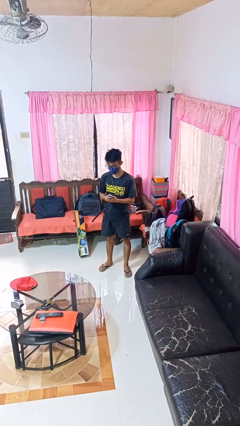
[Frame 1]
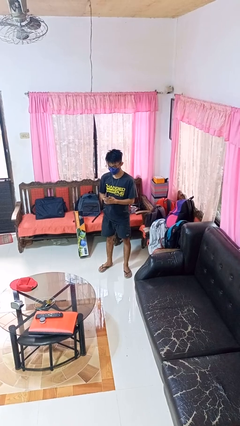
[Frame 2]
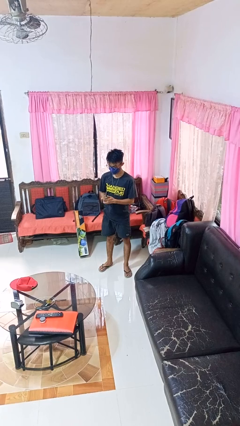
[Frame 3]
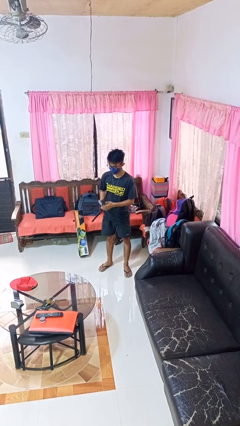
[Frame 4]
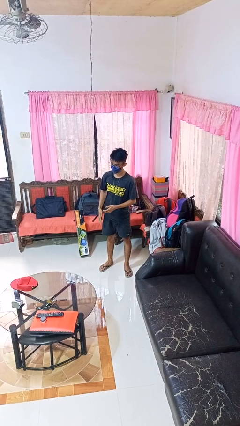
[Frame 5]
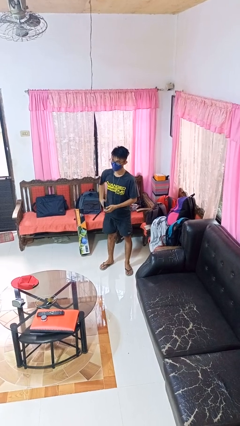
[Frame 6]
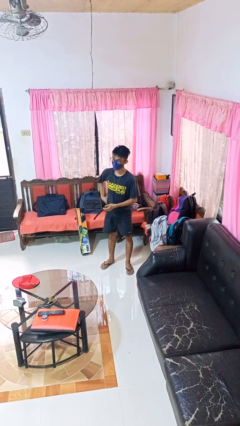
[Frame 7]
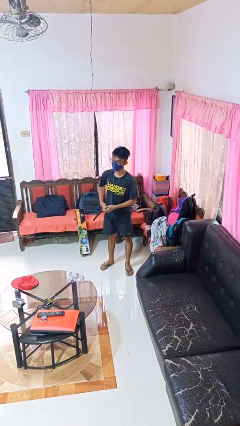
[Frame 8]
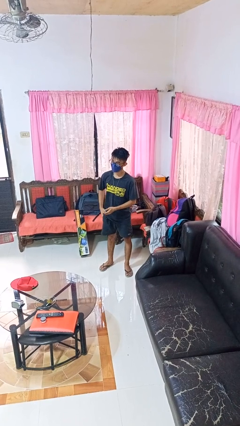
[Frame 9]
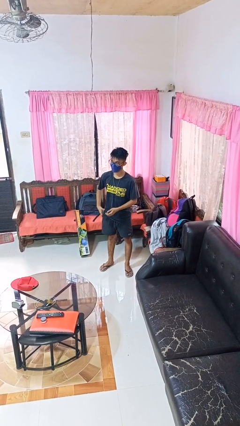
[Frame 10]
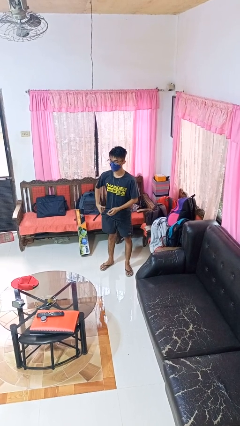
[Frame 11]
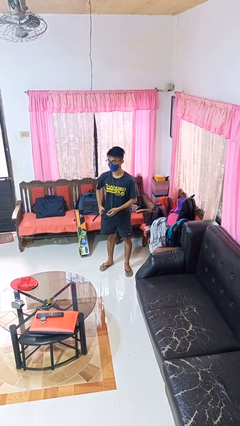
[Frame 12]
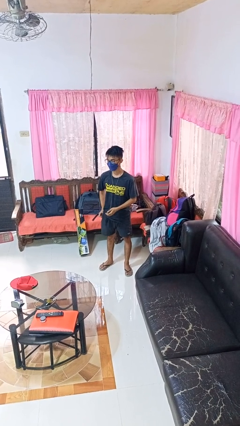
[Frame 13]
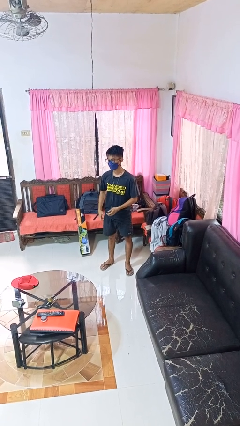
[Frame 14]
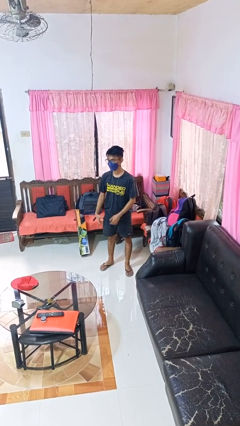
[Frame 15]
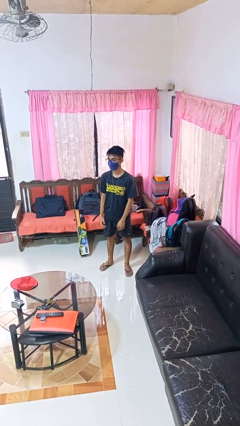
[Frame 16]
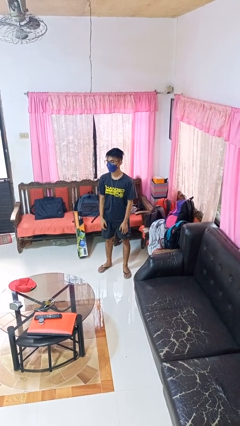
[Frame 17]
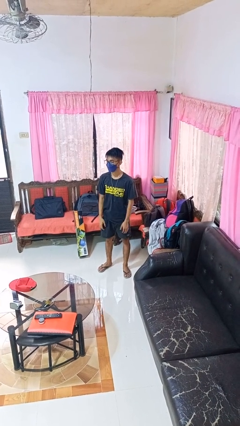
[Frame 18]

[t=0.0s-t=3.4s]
person puts phone into pocket

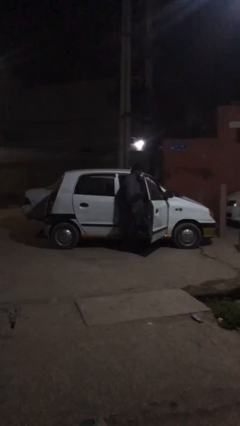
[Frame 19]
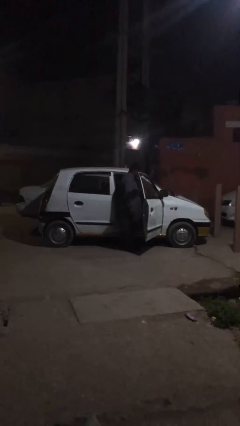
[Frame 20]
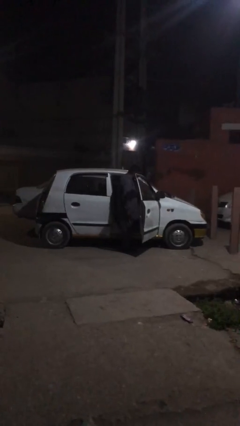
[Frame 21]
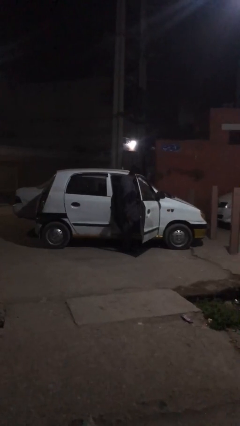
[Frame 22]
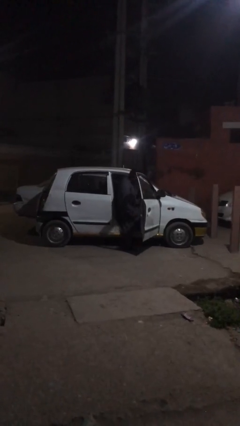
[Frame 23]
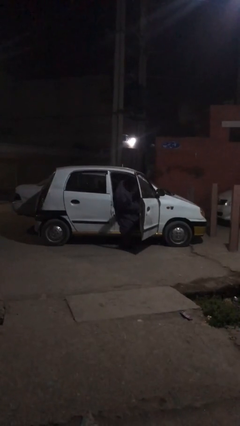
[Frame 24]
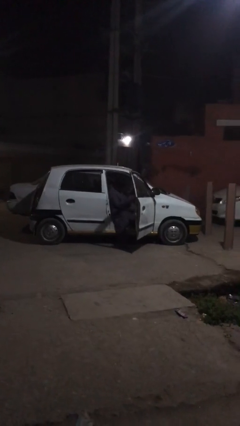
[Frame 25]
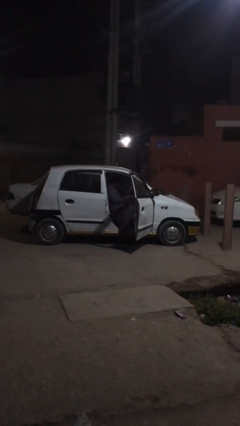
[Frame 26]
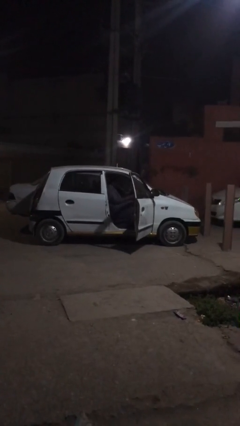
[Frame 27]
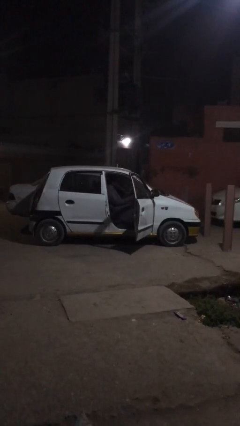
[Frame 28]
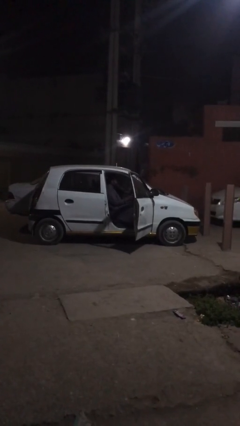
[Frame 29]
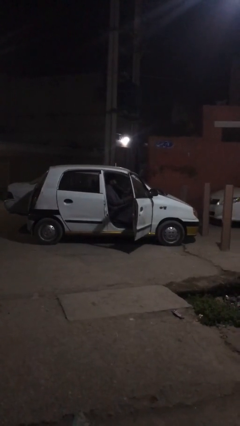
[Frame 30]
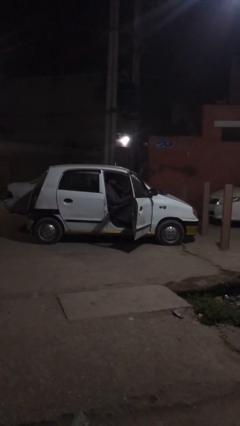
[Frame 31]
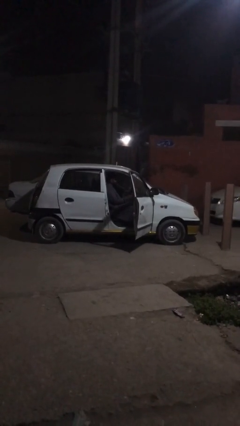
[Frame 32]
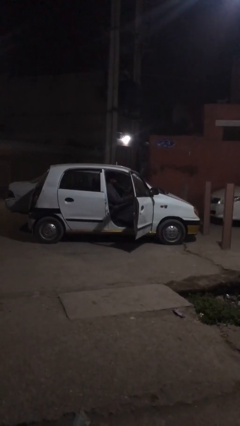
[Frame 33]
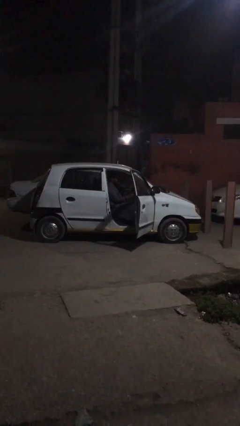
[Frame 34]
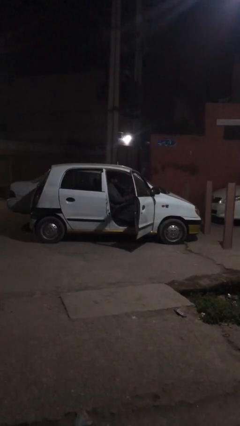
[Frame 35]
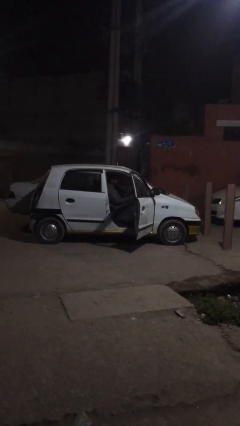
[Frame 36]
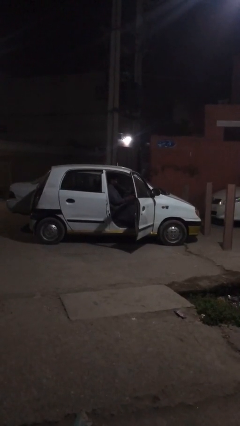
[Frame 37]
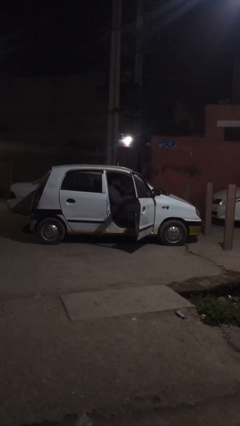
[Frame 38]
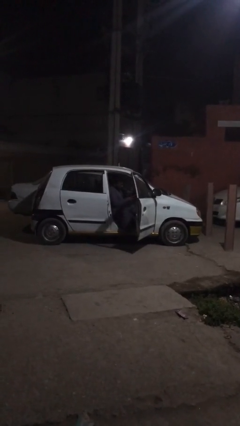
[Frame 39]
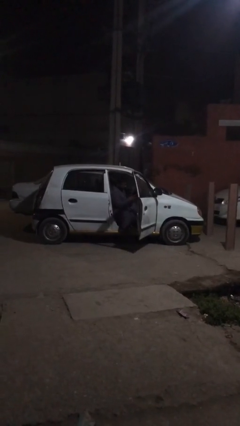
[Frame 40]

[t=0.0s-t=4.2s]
person enters car

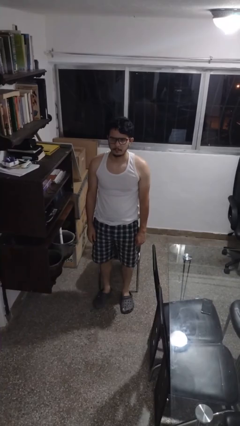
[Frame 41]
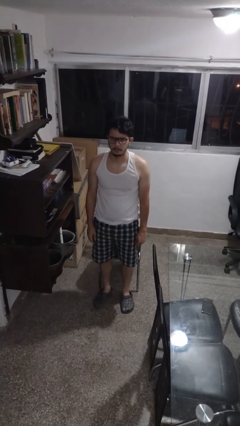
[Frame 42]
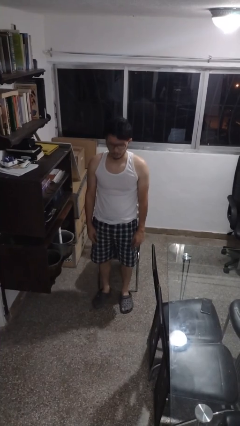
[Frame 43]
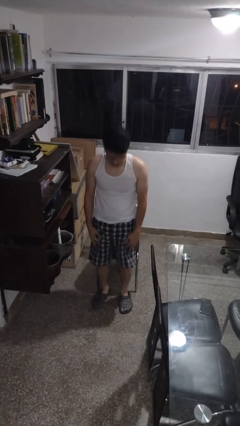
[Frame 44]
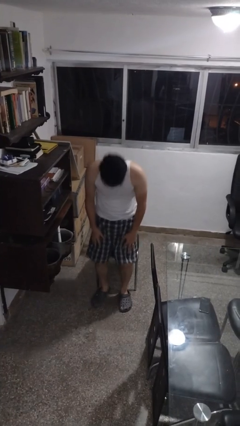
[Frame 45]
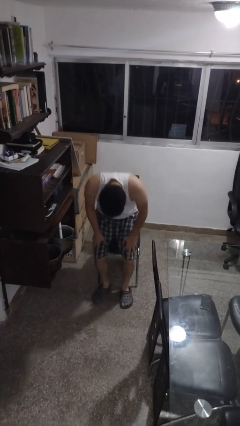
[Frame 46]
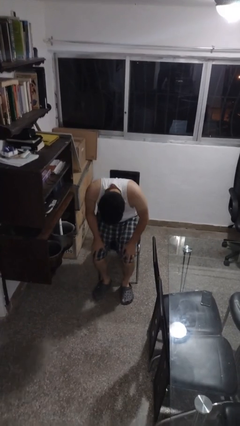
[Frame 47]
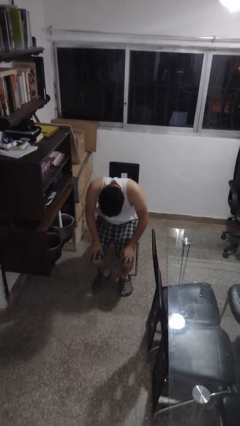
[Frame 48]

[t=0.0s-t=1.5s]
person sits down

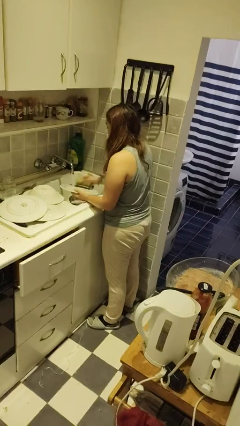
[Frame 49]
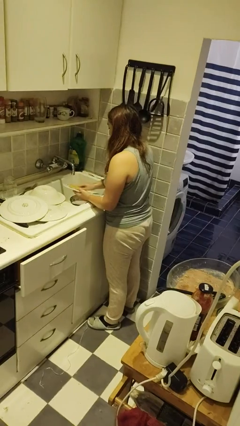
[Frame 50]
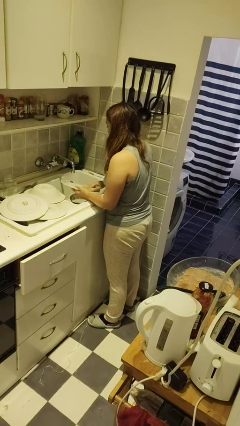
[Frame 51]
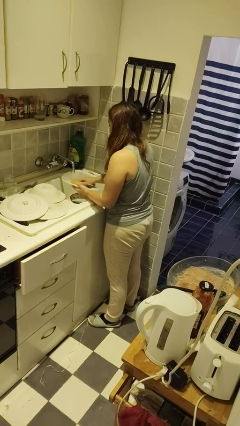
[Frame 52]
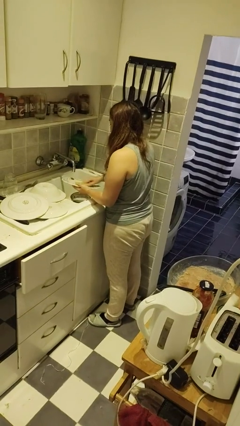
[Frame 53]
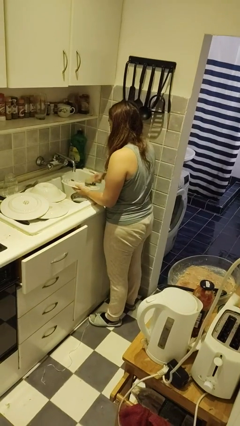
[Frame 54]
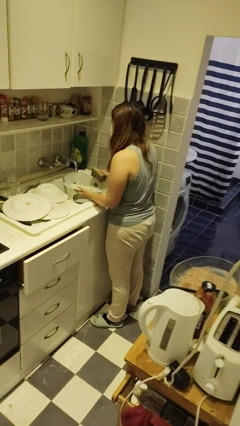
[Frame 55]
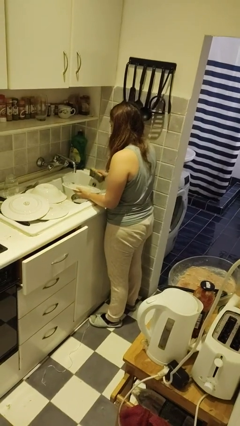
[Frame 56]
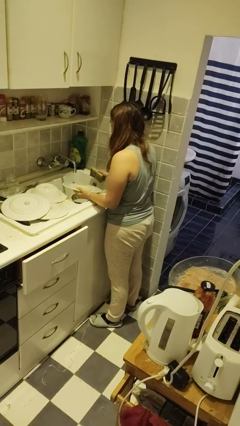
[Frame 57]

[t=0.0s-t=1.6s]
person washes dish

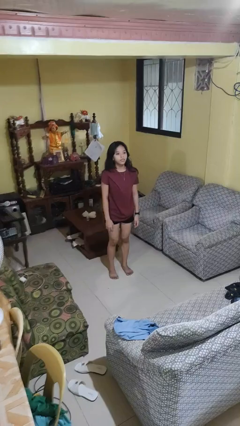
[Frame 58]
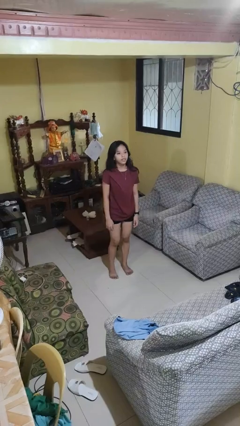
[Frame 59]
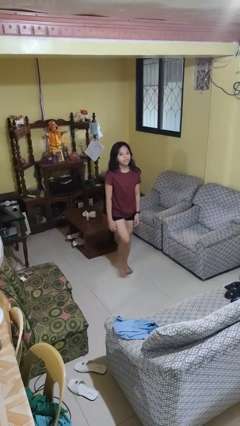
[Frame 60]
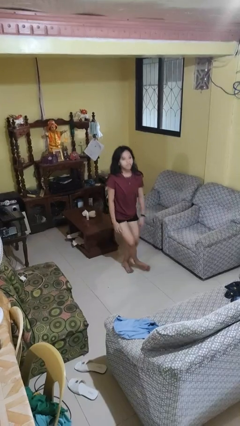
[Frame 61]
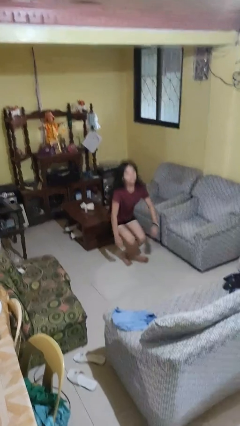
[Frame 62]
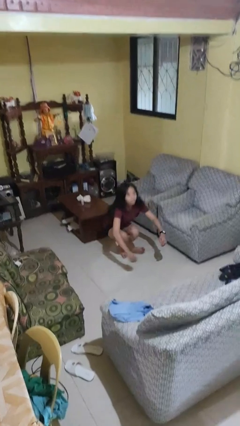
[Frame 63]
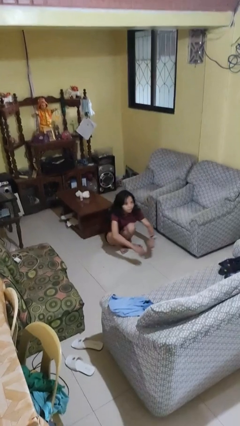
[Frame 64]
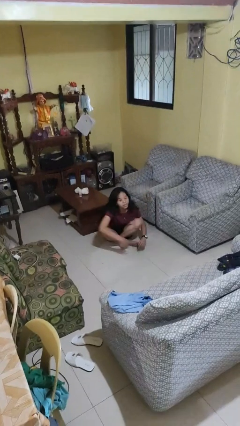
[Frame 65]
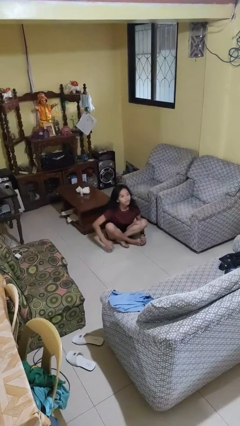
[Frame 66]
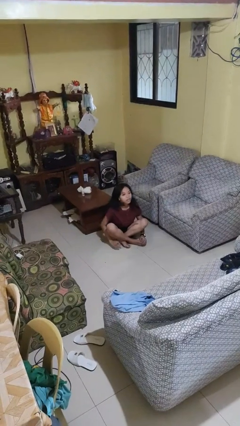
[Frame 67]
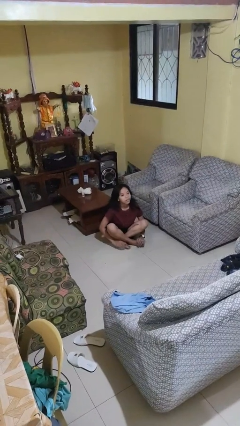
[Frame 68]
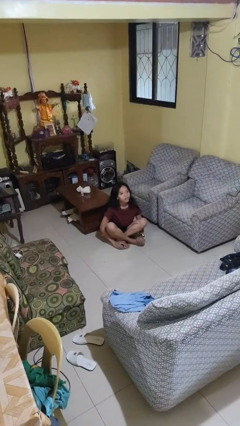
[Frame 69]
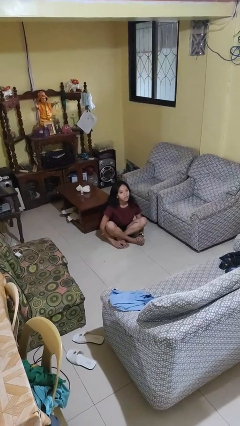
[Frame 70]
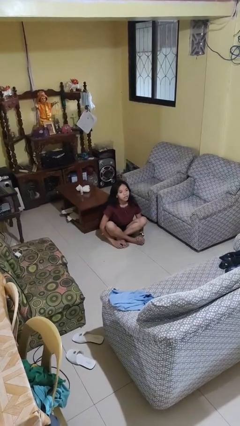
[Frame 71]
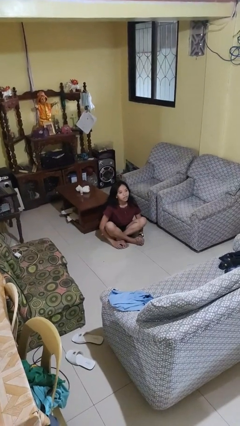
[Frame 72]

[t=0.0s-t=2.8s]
person sits crisscross

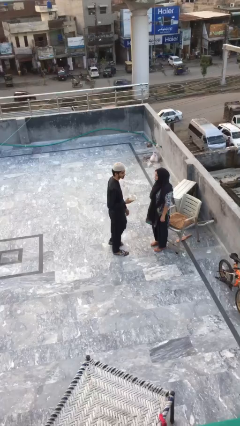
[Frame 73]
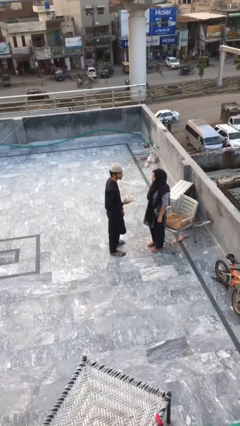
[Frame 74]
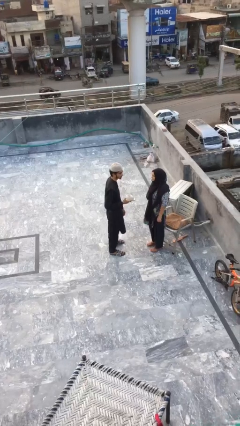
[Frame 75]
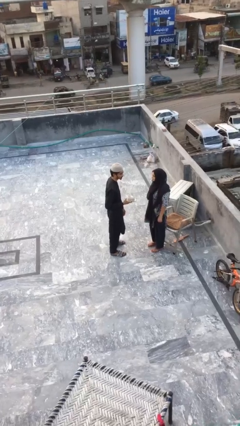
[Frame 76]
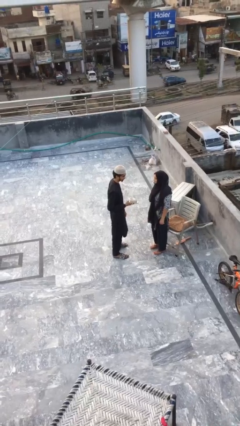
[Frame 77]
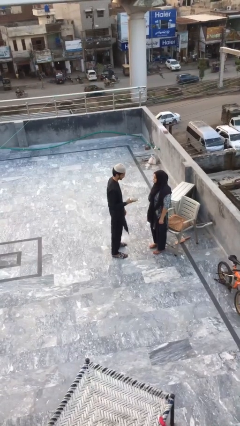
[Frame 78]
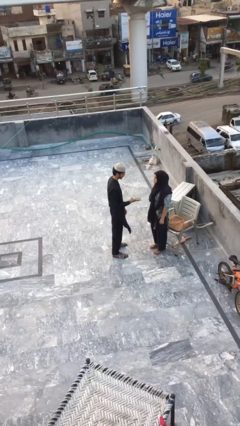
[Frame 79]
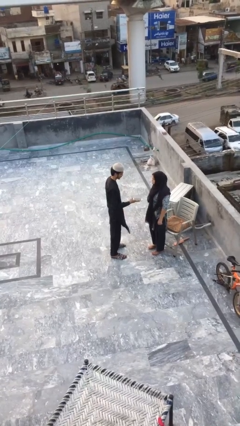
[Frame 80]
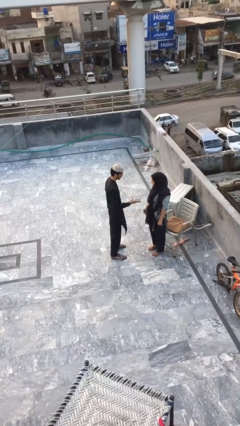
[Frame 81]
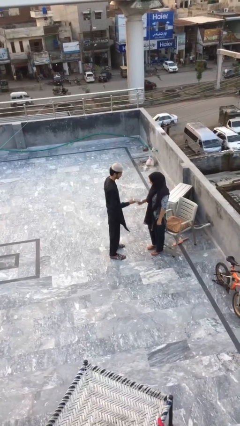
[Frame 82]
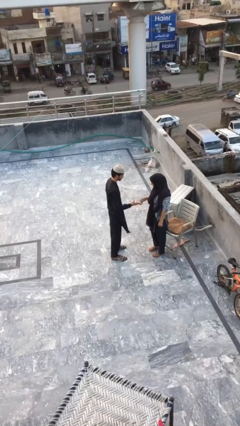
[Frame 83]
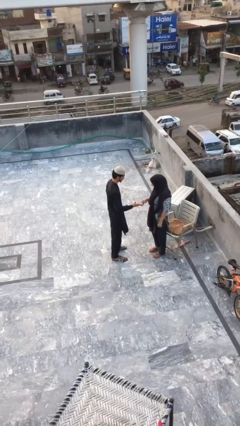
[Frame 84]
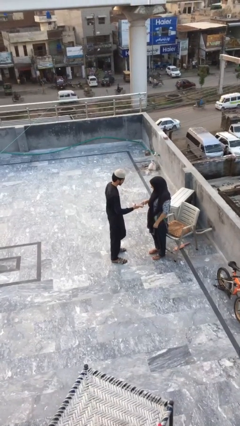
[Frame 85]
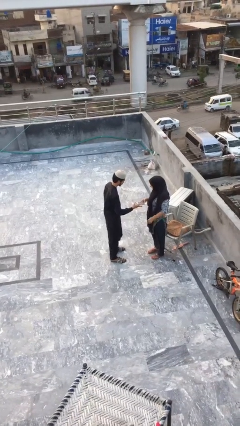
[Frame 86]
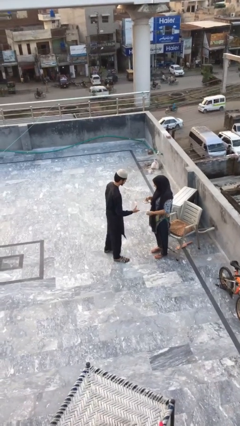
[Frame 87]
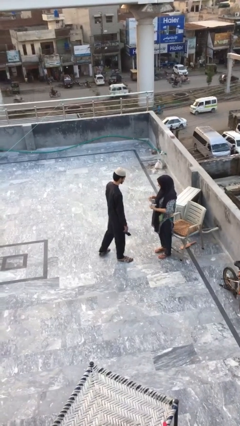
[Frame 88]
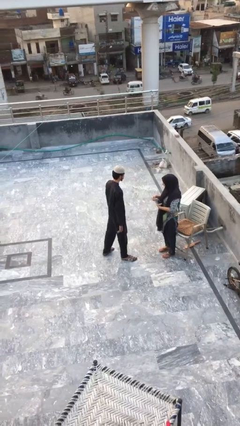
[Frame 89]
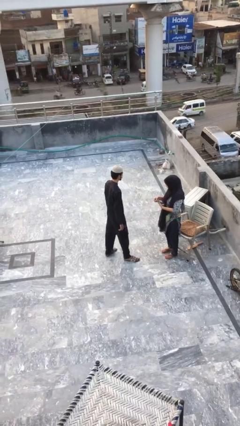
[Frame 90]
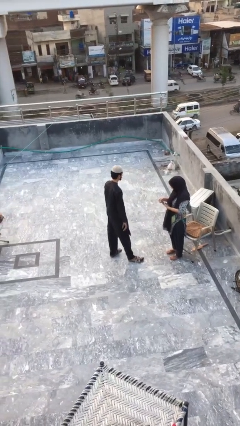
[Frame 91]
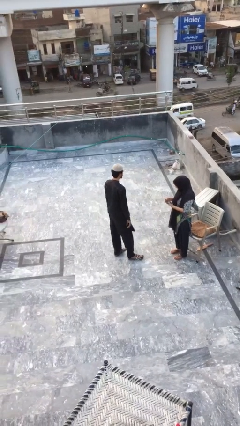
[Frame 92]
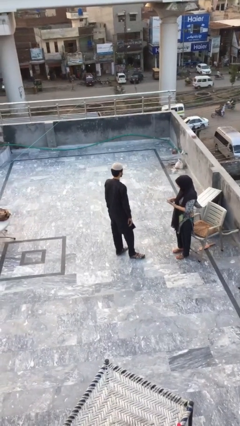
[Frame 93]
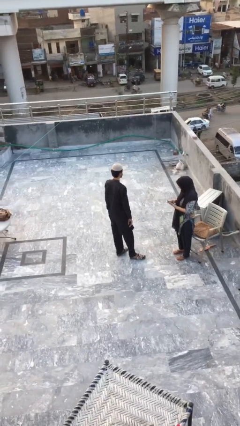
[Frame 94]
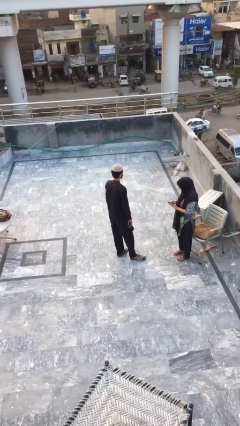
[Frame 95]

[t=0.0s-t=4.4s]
person transfers object to person
